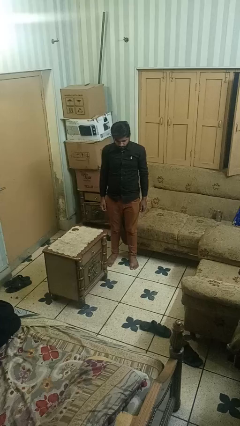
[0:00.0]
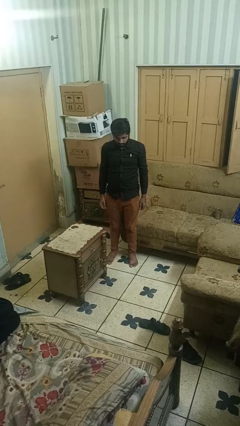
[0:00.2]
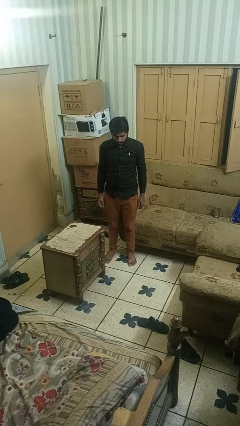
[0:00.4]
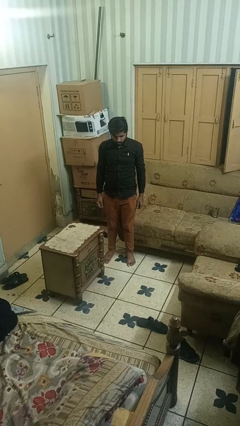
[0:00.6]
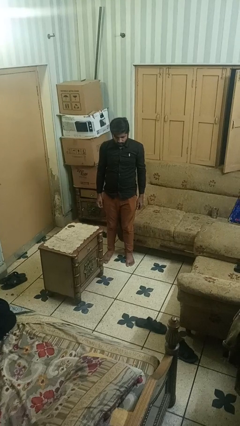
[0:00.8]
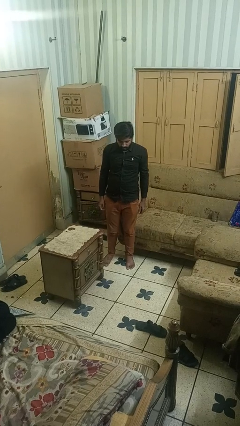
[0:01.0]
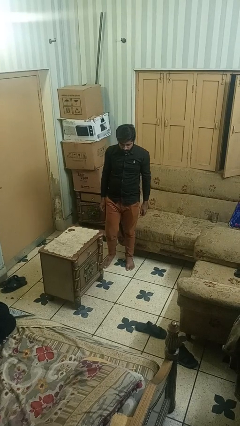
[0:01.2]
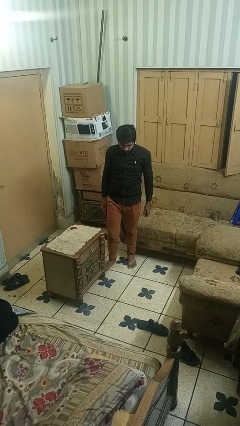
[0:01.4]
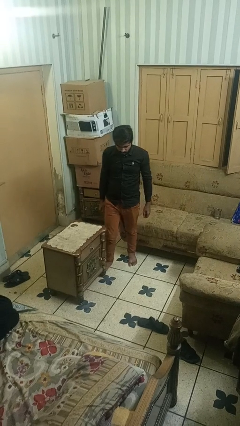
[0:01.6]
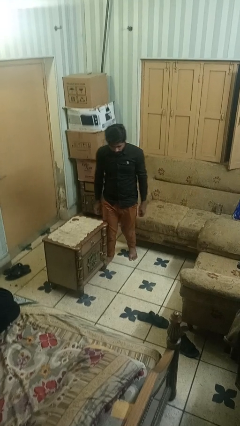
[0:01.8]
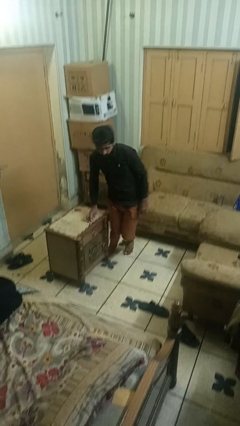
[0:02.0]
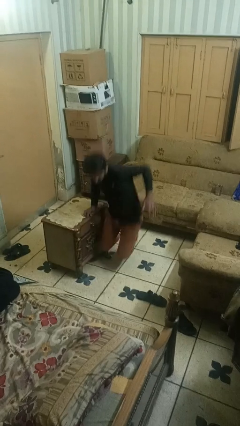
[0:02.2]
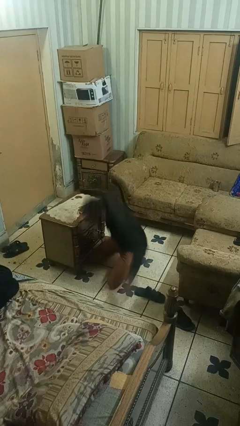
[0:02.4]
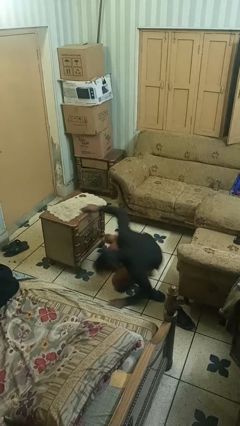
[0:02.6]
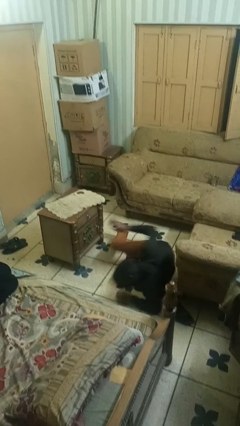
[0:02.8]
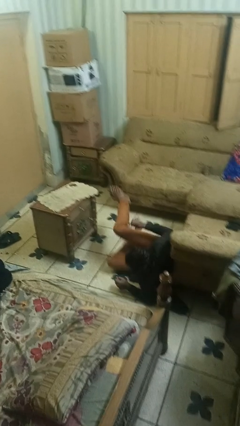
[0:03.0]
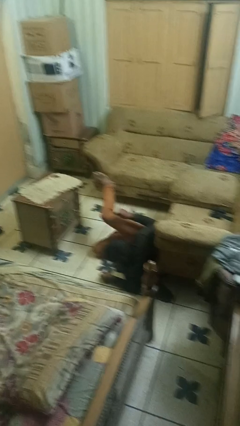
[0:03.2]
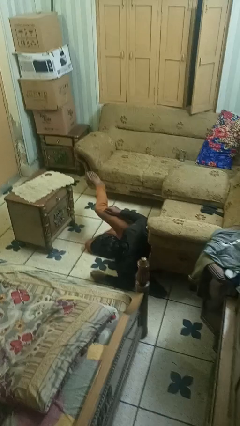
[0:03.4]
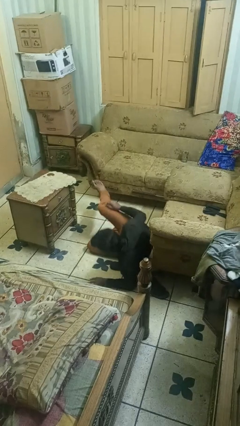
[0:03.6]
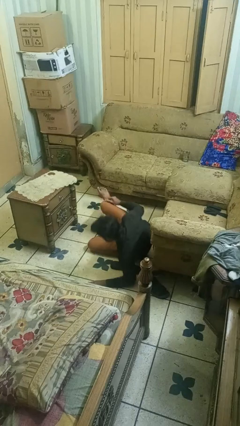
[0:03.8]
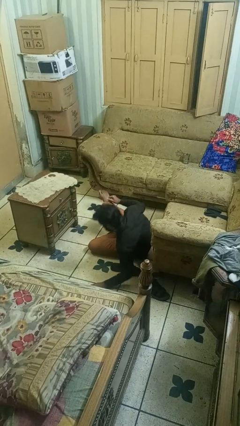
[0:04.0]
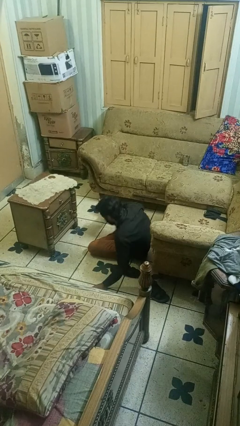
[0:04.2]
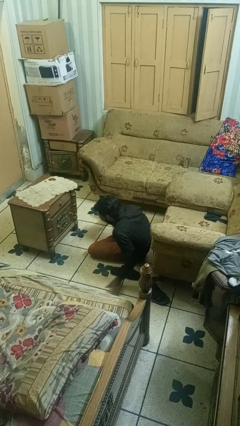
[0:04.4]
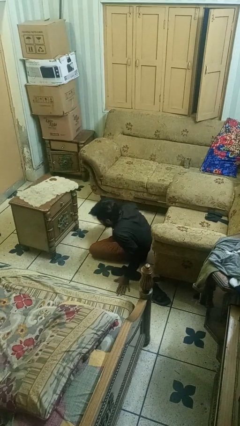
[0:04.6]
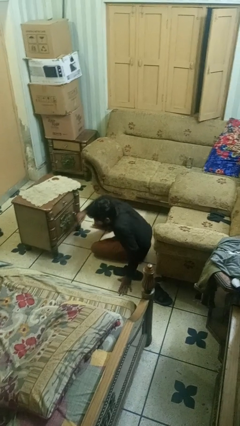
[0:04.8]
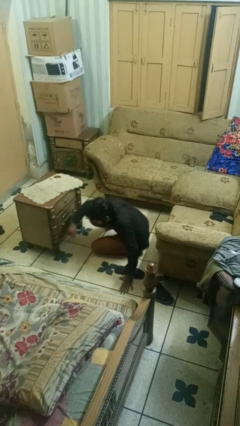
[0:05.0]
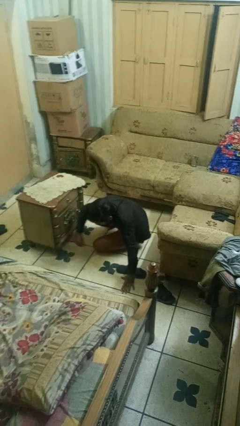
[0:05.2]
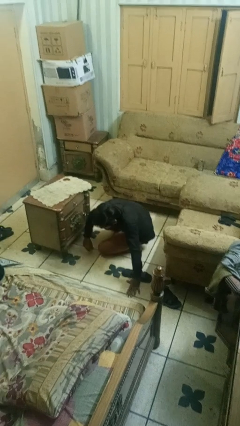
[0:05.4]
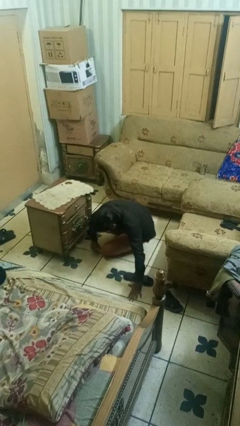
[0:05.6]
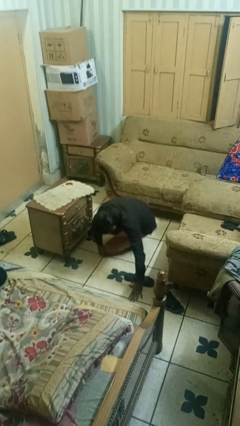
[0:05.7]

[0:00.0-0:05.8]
person bumps into table

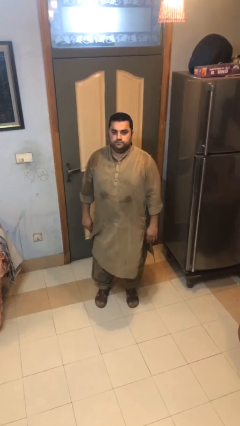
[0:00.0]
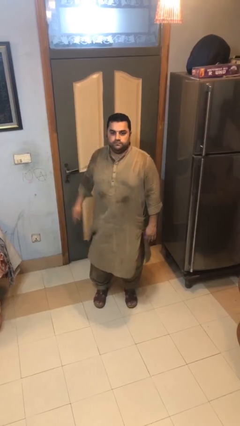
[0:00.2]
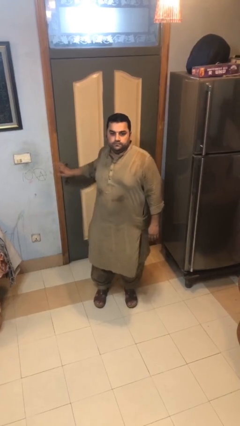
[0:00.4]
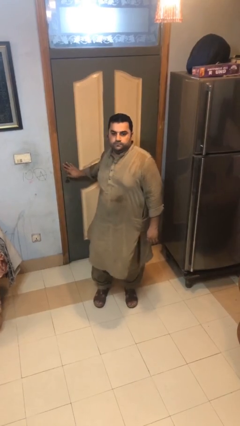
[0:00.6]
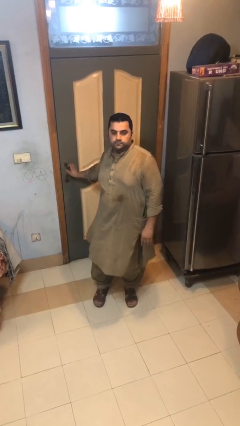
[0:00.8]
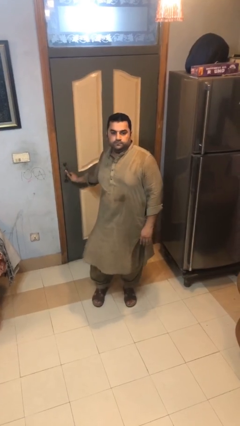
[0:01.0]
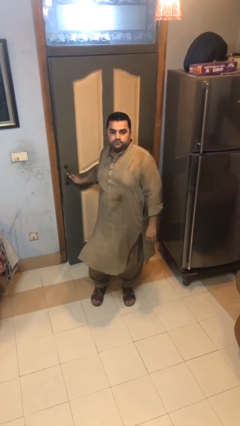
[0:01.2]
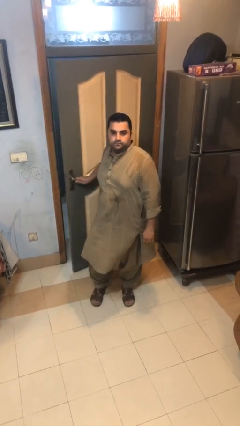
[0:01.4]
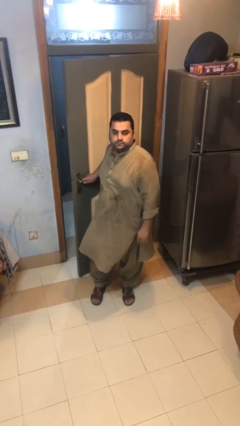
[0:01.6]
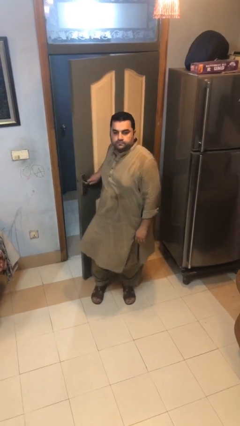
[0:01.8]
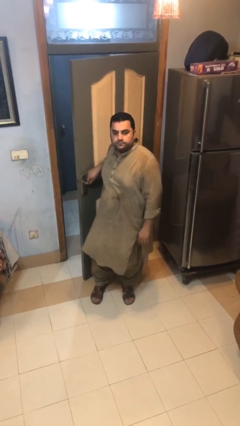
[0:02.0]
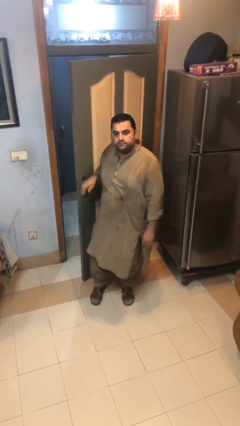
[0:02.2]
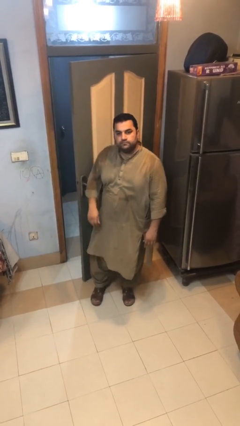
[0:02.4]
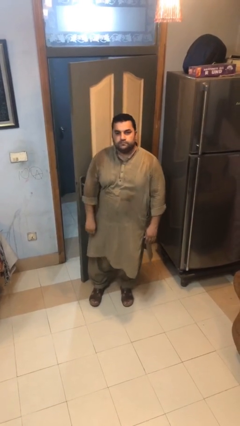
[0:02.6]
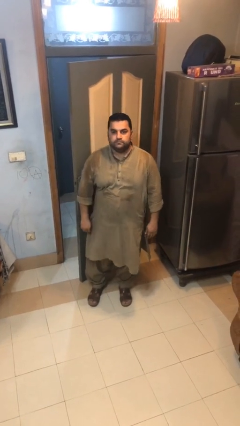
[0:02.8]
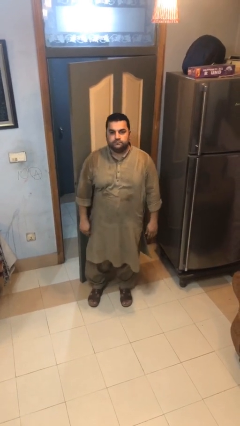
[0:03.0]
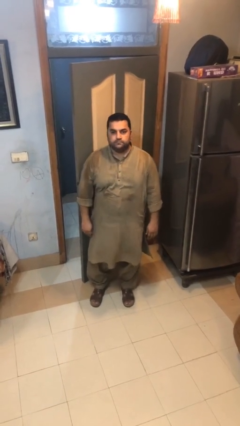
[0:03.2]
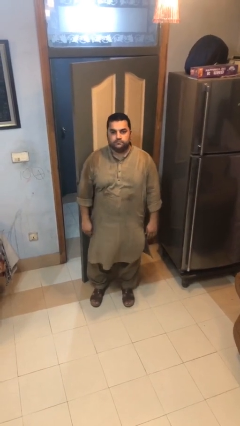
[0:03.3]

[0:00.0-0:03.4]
person opens facility door

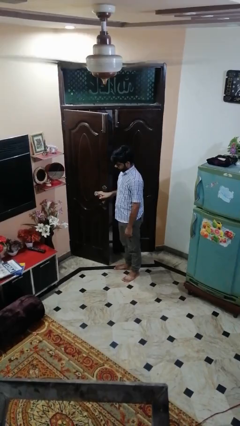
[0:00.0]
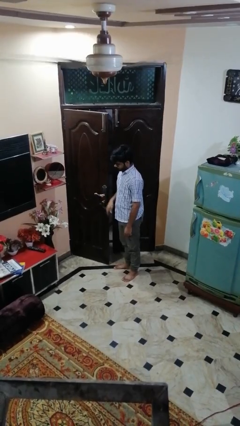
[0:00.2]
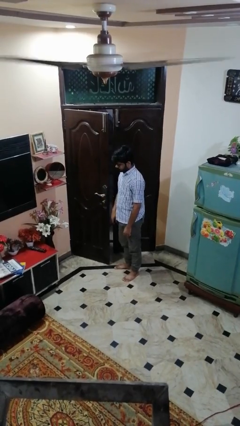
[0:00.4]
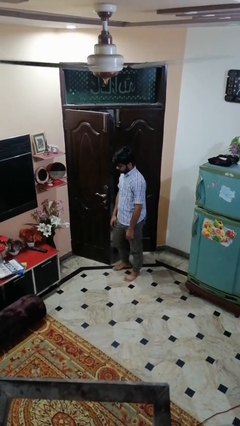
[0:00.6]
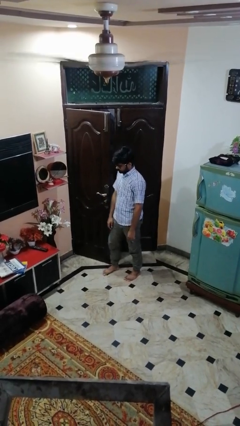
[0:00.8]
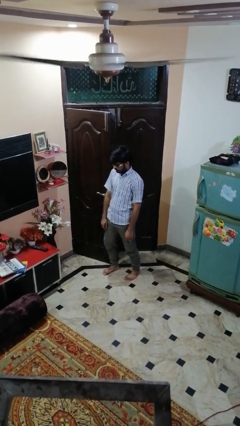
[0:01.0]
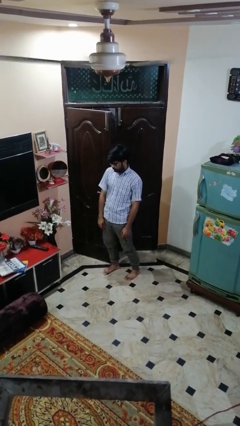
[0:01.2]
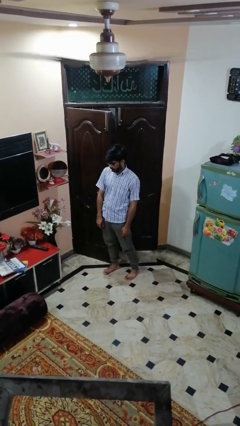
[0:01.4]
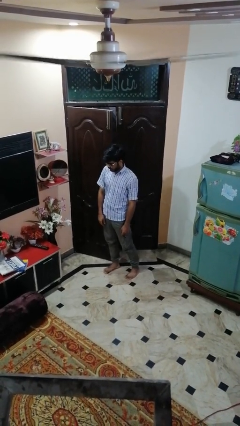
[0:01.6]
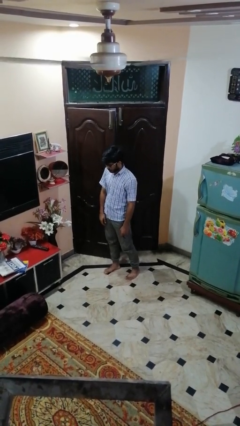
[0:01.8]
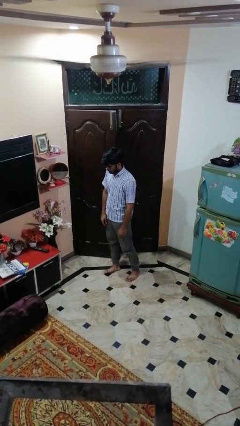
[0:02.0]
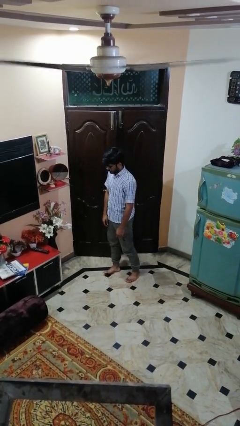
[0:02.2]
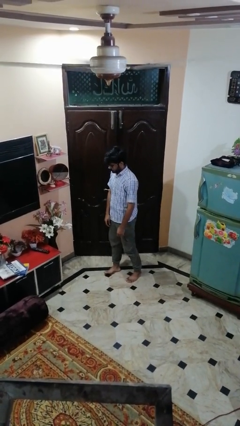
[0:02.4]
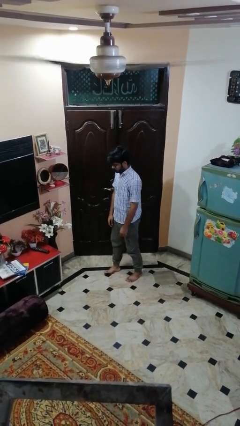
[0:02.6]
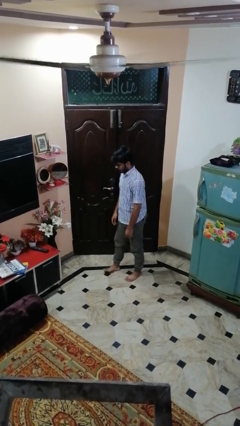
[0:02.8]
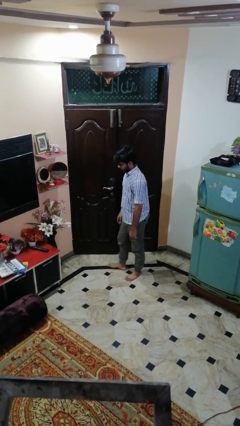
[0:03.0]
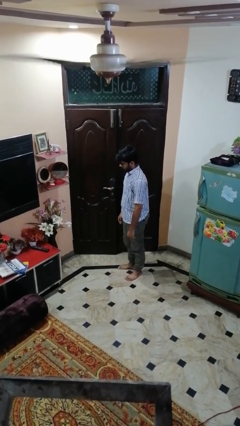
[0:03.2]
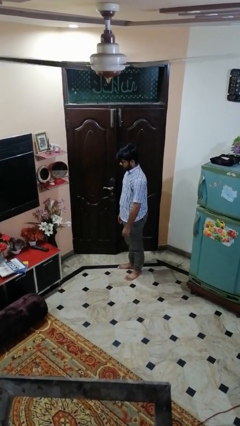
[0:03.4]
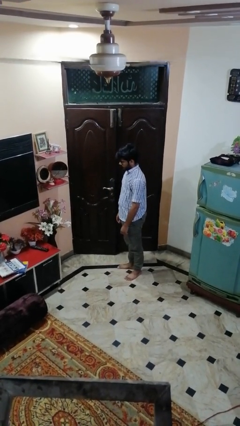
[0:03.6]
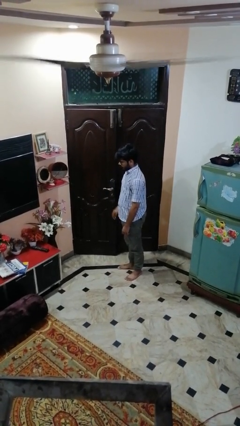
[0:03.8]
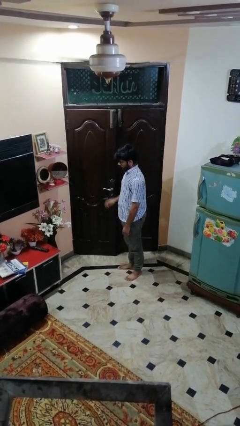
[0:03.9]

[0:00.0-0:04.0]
person closes door with hip

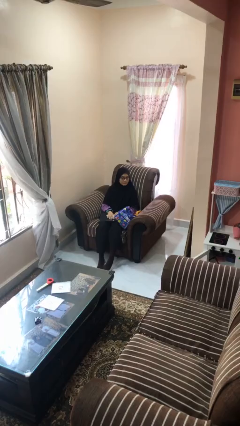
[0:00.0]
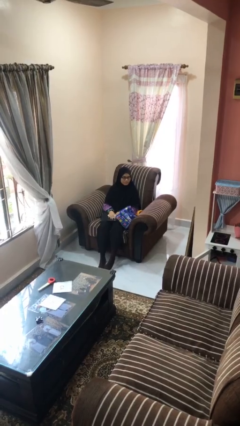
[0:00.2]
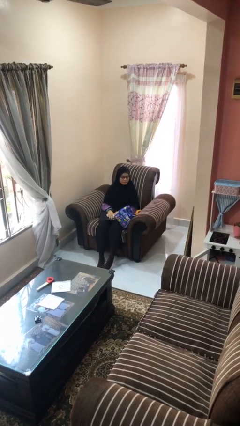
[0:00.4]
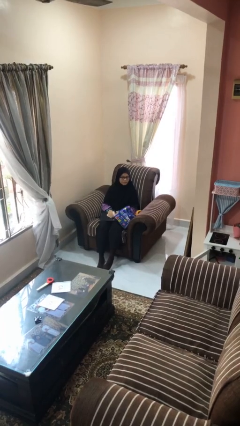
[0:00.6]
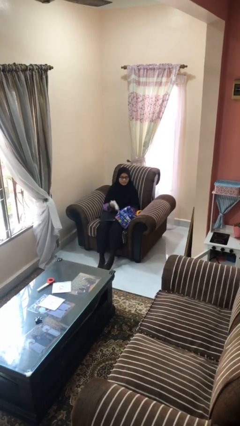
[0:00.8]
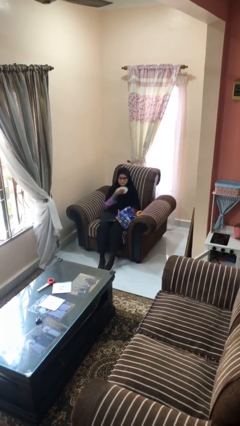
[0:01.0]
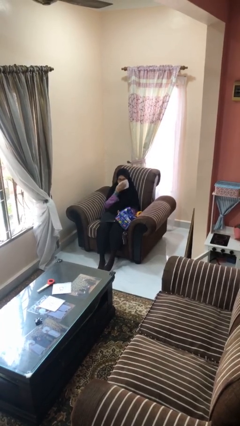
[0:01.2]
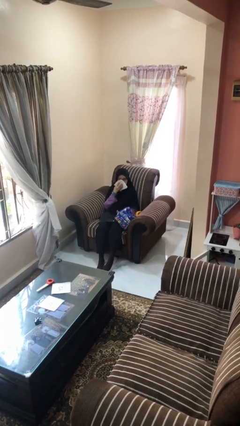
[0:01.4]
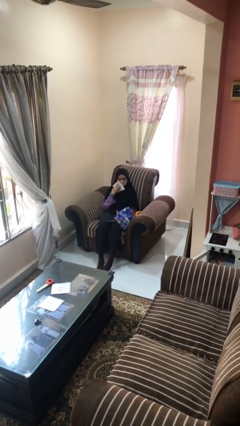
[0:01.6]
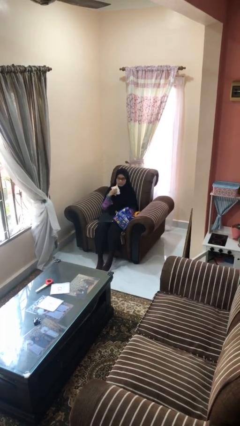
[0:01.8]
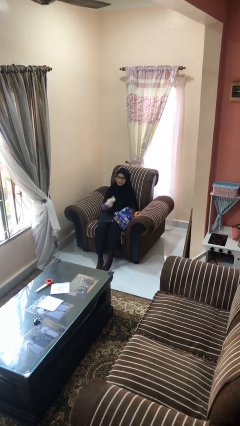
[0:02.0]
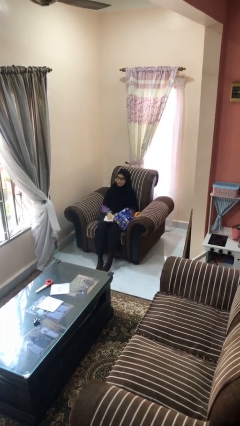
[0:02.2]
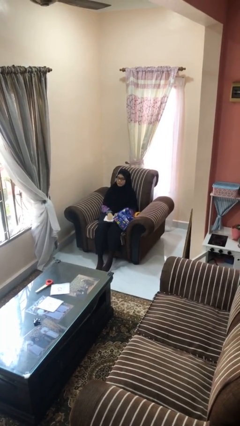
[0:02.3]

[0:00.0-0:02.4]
person wipes mouth with napkin

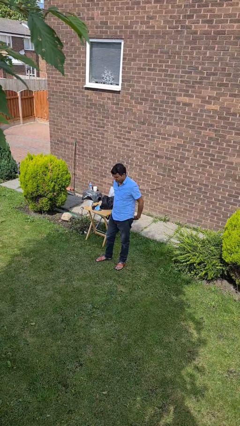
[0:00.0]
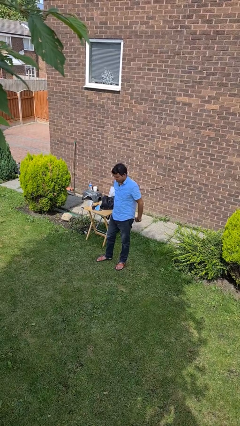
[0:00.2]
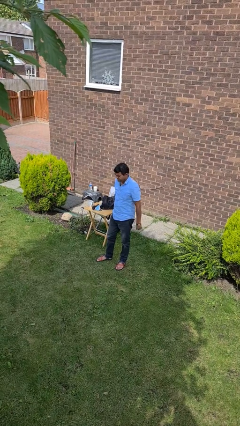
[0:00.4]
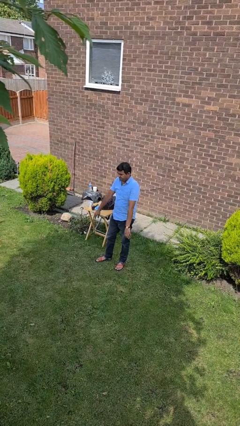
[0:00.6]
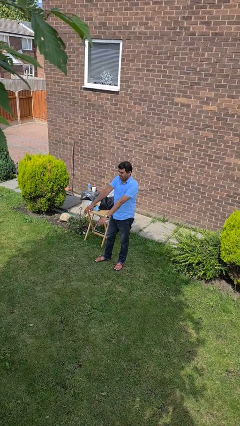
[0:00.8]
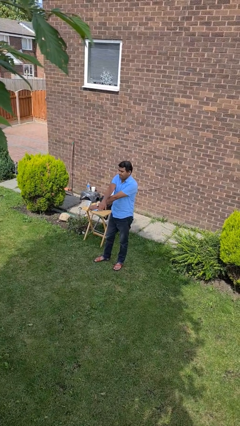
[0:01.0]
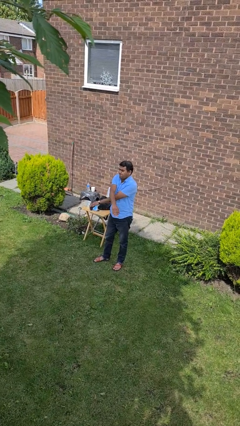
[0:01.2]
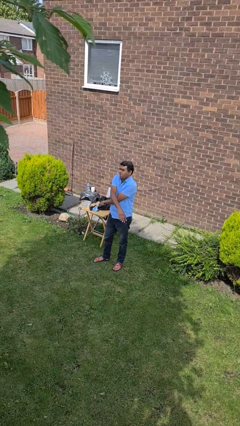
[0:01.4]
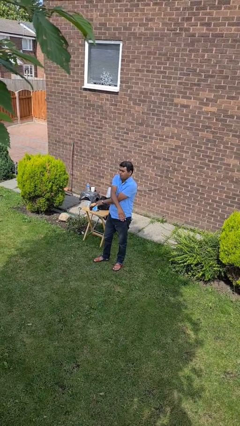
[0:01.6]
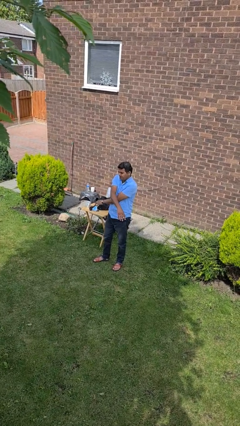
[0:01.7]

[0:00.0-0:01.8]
person crosses arms
